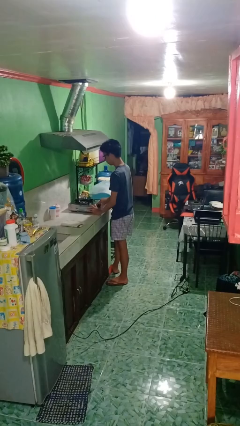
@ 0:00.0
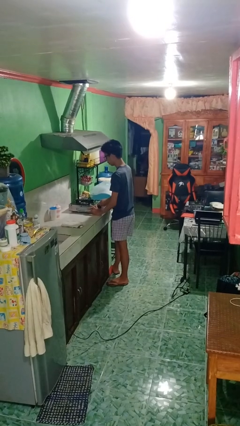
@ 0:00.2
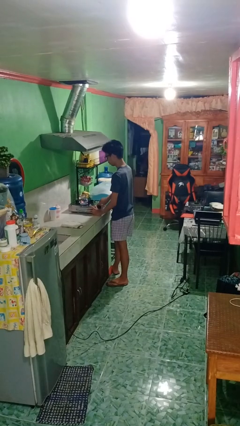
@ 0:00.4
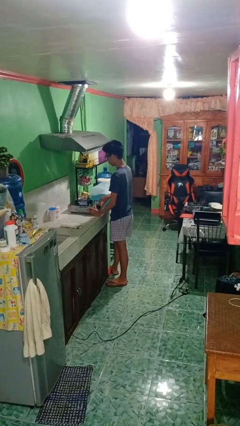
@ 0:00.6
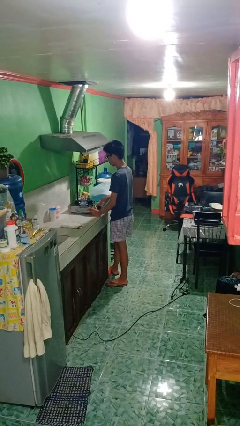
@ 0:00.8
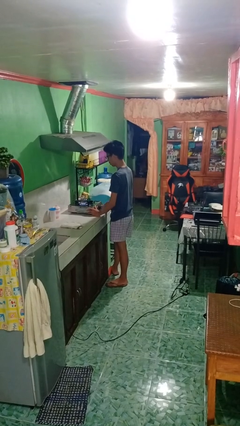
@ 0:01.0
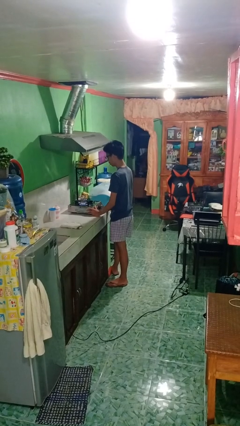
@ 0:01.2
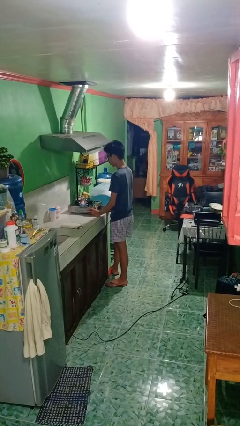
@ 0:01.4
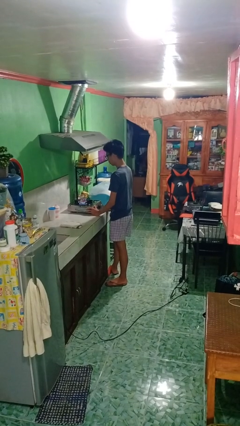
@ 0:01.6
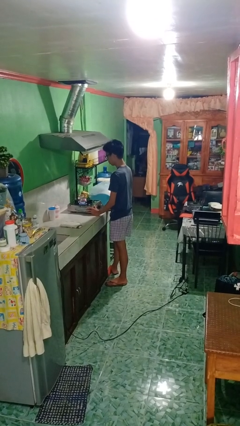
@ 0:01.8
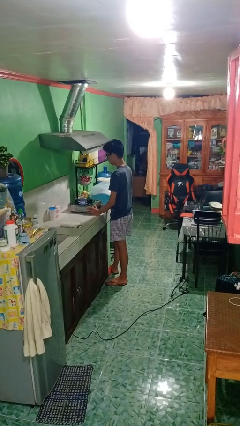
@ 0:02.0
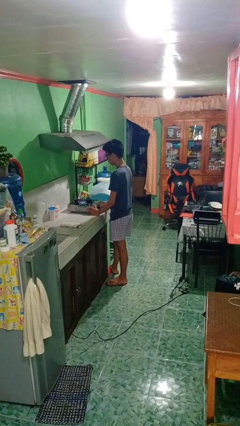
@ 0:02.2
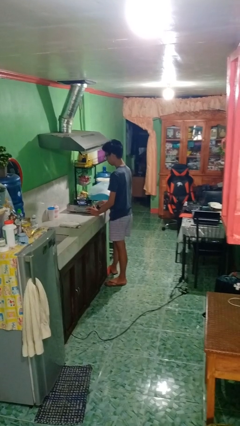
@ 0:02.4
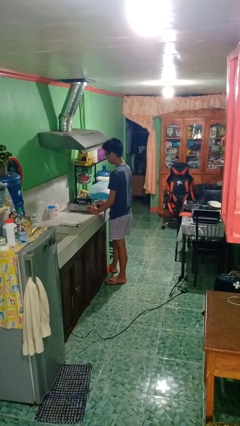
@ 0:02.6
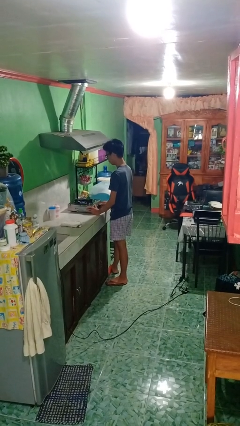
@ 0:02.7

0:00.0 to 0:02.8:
person turns on stovetop

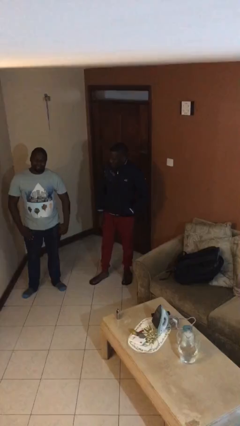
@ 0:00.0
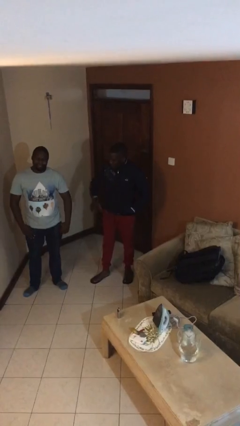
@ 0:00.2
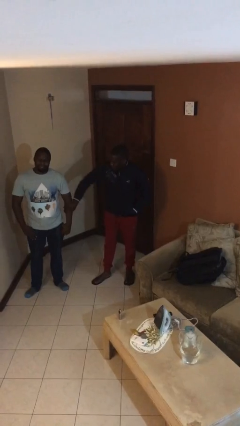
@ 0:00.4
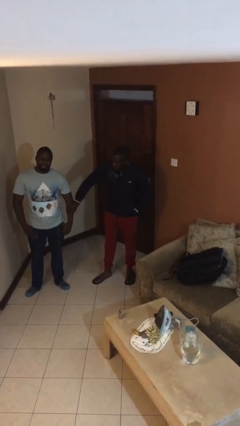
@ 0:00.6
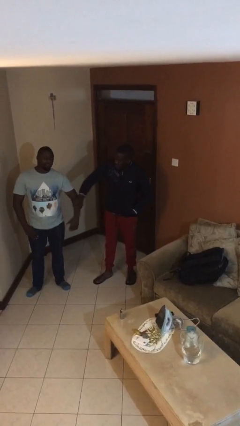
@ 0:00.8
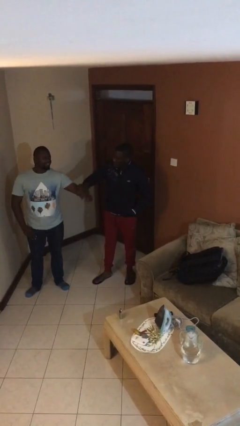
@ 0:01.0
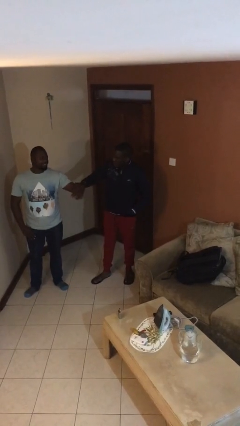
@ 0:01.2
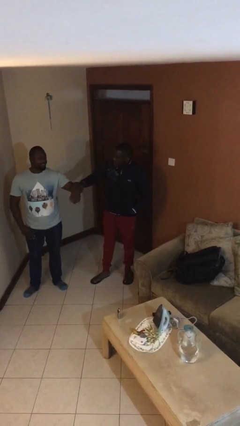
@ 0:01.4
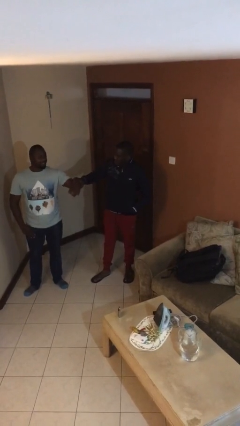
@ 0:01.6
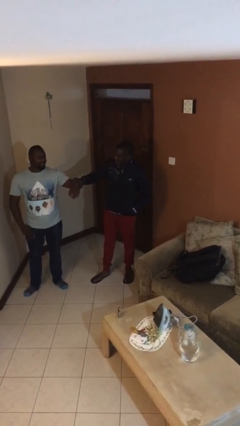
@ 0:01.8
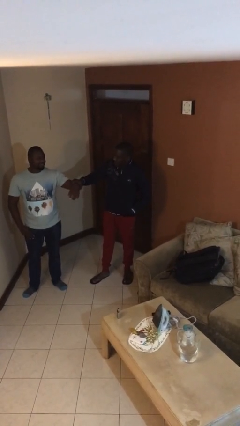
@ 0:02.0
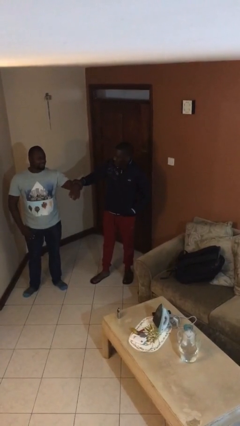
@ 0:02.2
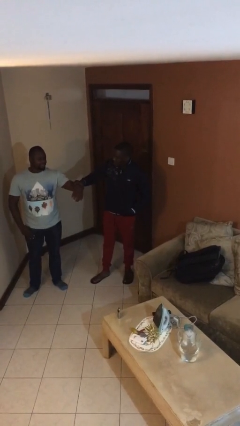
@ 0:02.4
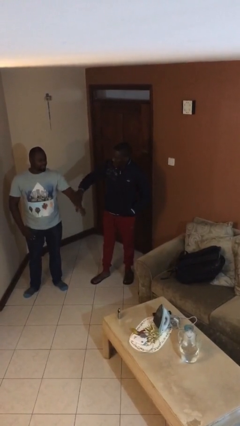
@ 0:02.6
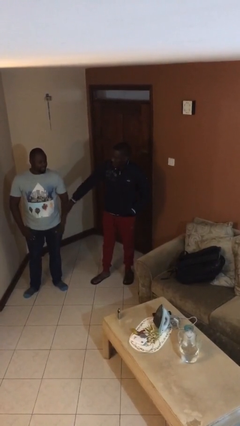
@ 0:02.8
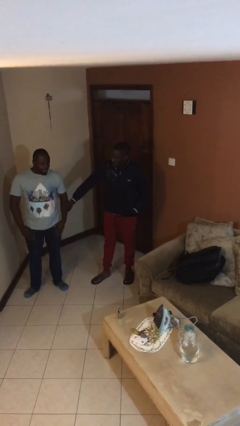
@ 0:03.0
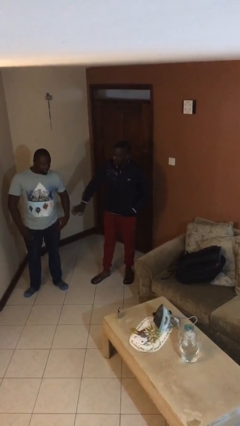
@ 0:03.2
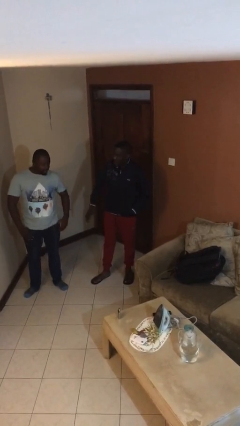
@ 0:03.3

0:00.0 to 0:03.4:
person grabs person by forearm

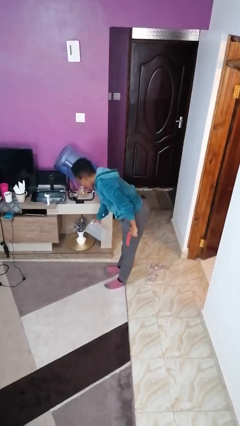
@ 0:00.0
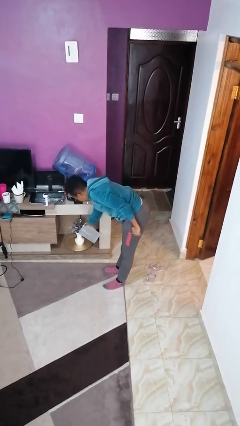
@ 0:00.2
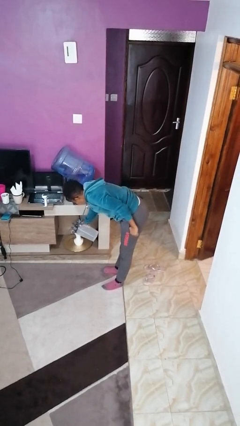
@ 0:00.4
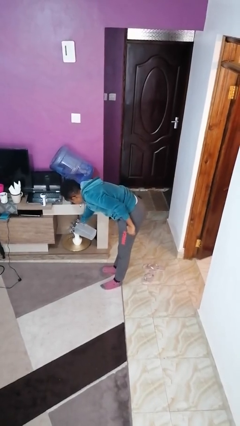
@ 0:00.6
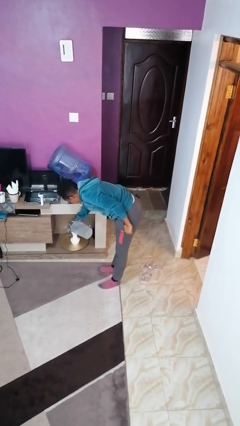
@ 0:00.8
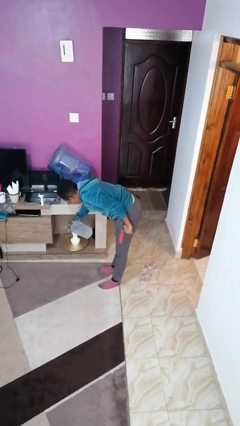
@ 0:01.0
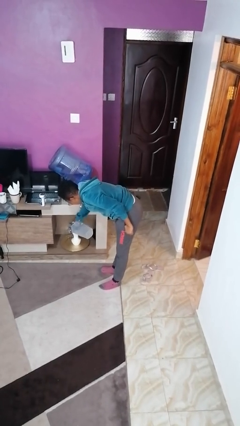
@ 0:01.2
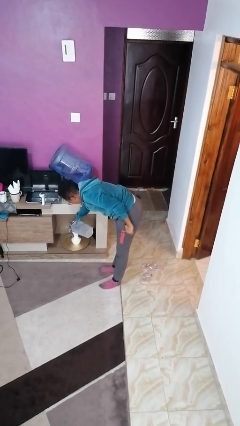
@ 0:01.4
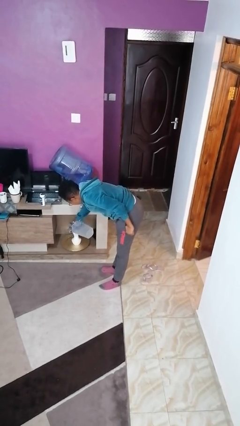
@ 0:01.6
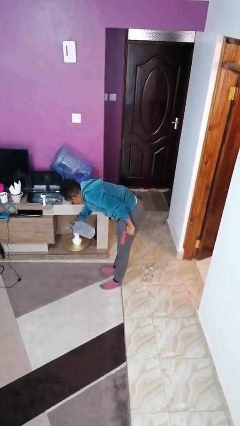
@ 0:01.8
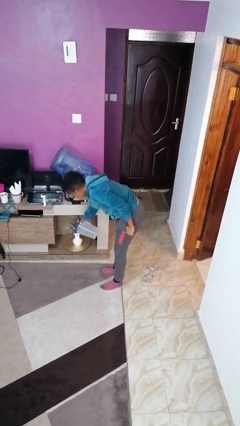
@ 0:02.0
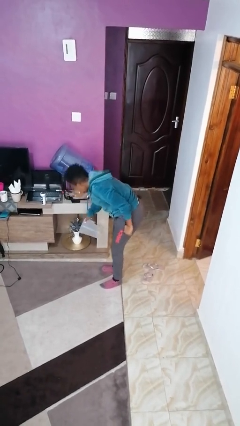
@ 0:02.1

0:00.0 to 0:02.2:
person waters houseplant

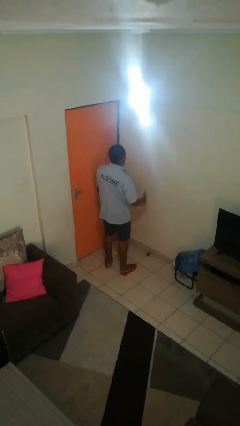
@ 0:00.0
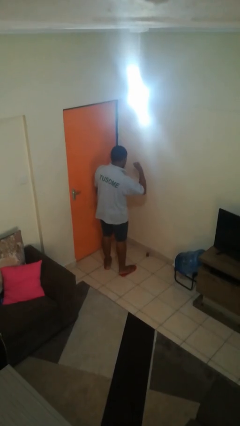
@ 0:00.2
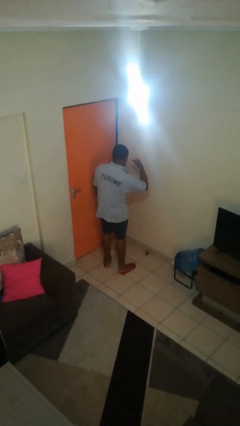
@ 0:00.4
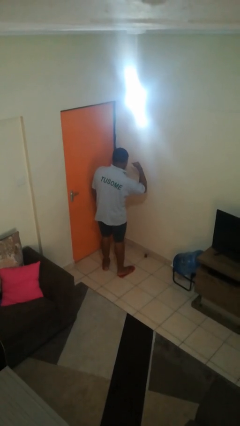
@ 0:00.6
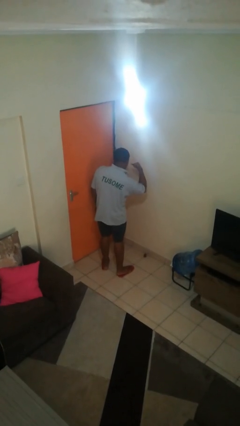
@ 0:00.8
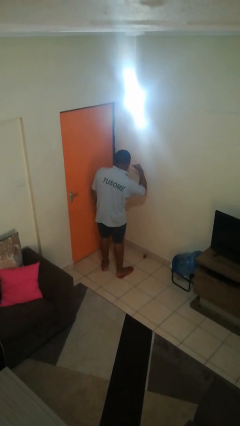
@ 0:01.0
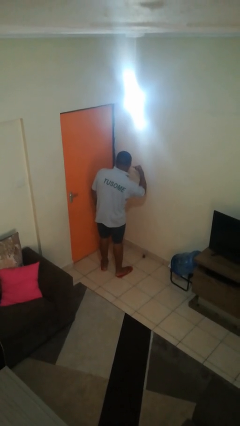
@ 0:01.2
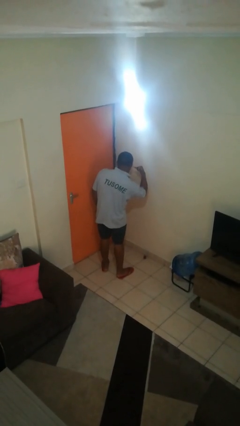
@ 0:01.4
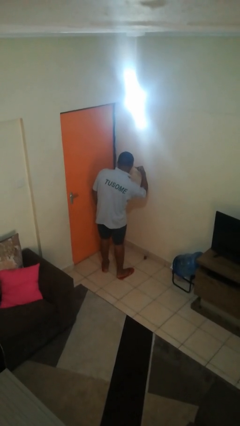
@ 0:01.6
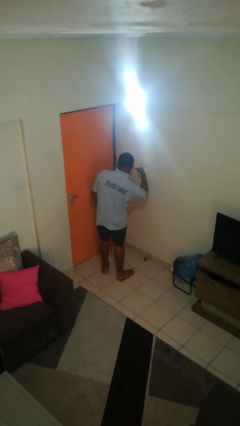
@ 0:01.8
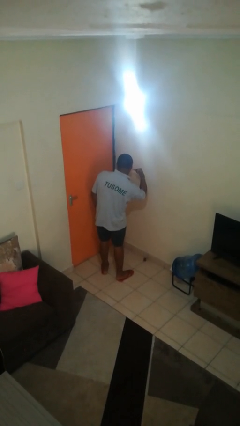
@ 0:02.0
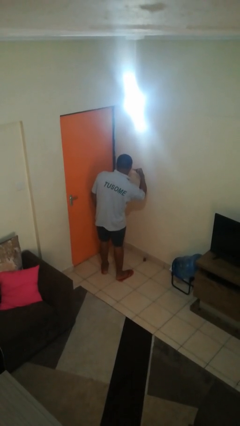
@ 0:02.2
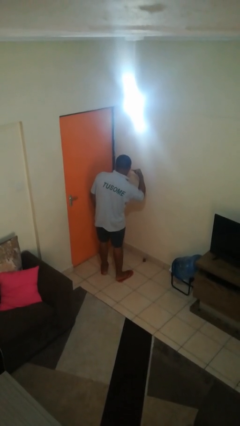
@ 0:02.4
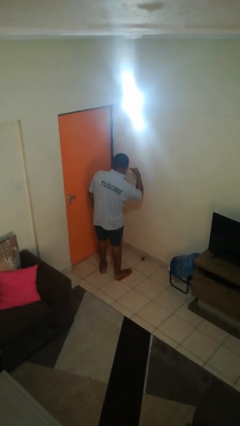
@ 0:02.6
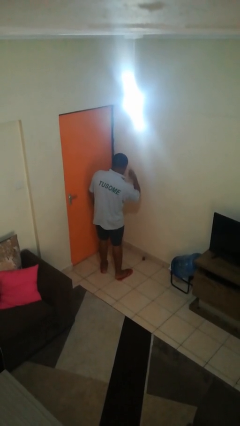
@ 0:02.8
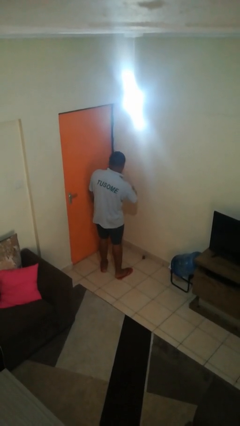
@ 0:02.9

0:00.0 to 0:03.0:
person gestures call me

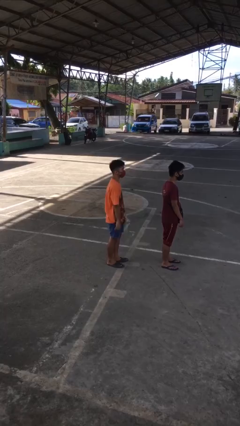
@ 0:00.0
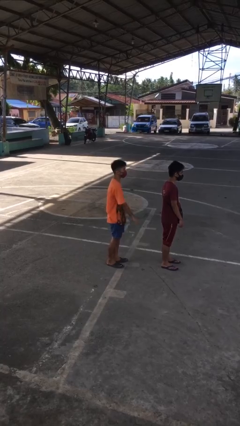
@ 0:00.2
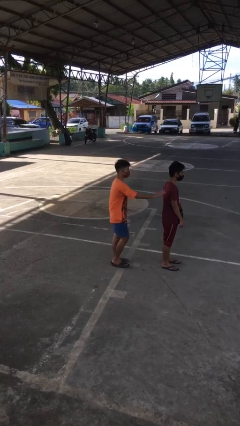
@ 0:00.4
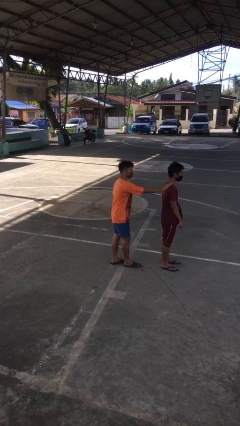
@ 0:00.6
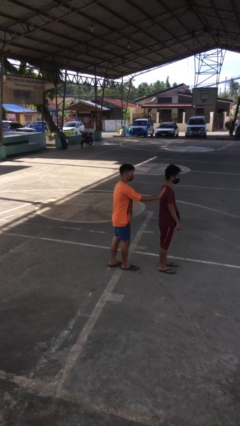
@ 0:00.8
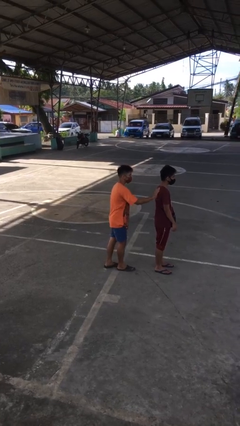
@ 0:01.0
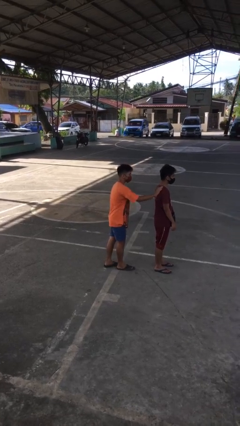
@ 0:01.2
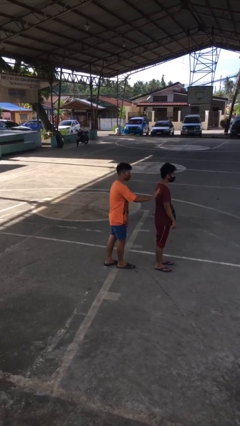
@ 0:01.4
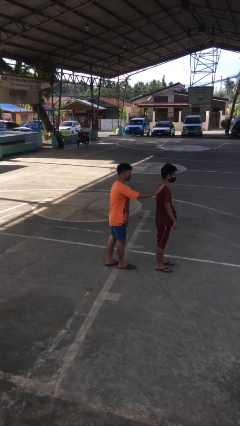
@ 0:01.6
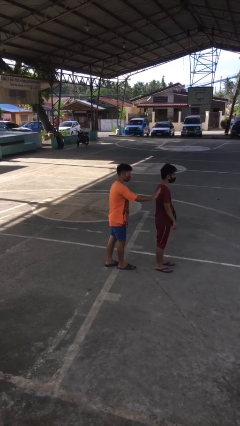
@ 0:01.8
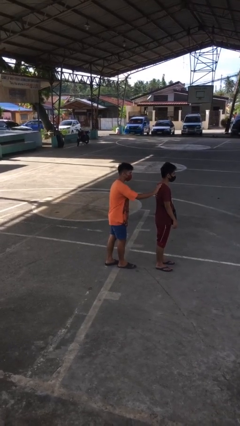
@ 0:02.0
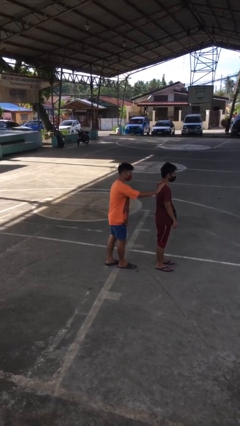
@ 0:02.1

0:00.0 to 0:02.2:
person touches back of person

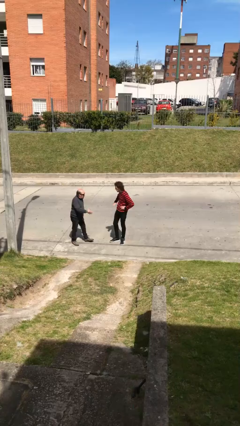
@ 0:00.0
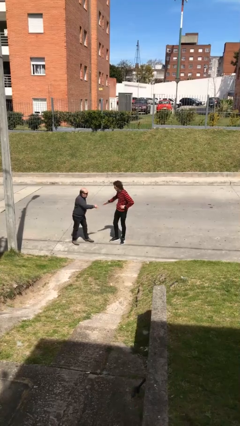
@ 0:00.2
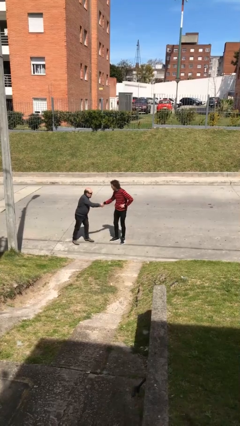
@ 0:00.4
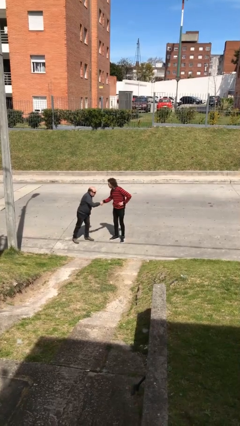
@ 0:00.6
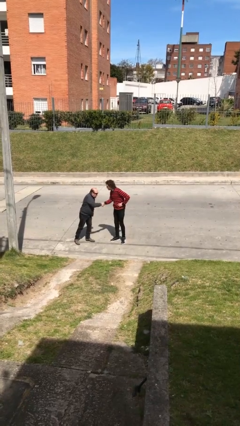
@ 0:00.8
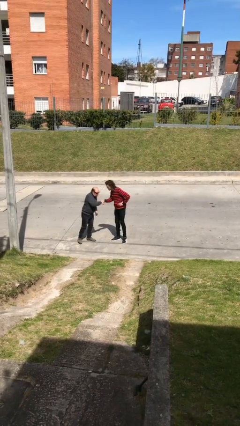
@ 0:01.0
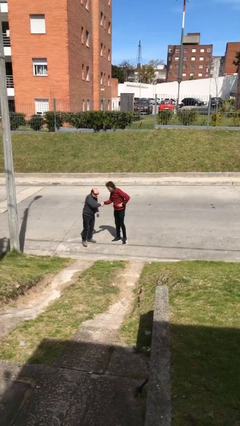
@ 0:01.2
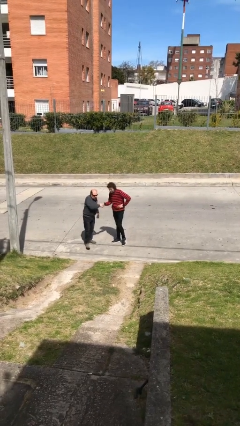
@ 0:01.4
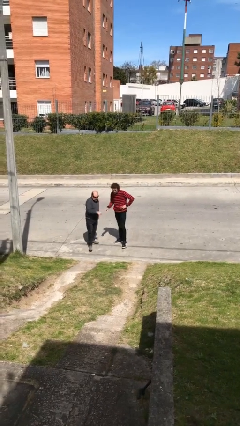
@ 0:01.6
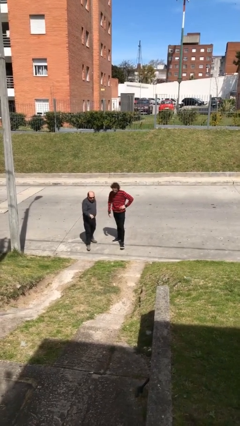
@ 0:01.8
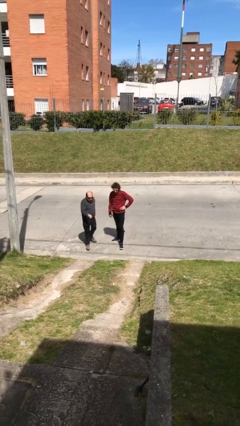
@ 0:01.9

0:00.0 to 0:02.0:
person shakes hand

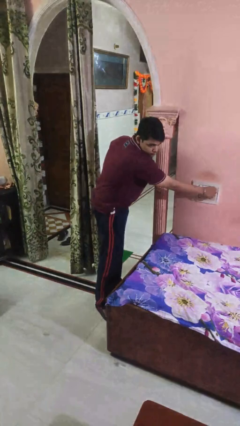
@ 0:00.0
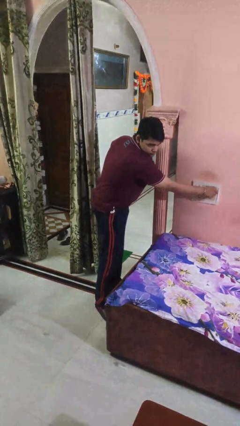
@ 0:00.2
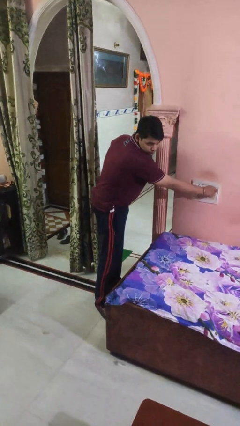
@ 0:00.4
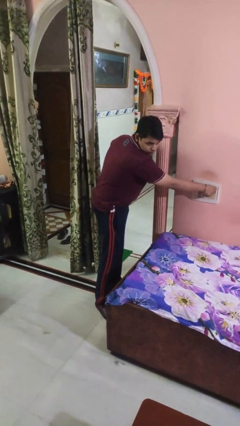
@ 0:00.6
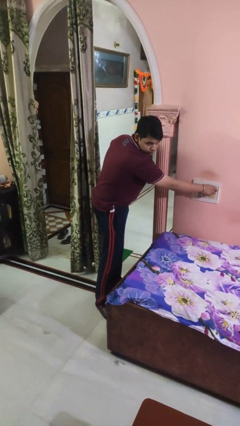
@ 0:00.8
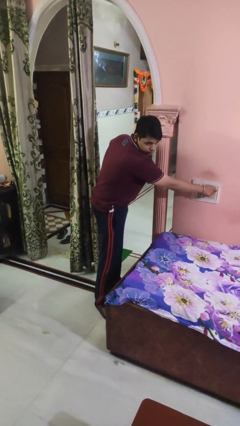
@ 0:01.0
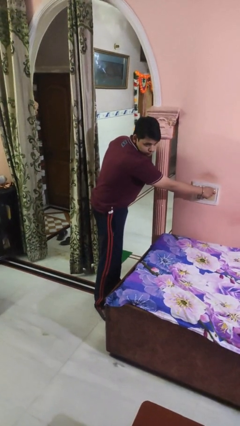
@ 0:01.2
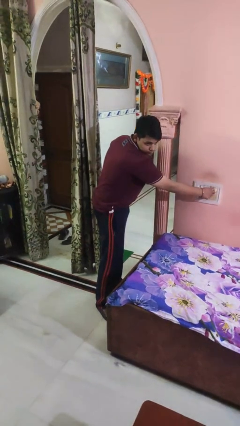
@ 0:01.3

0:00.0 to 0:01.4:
person adjusts thermostat
